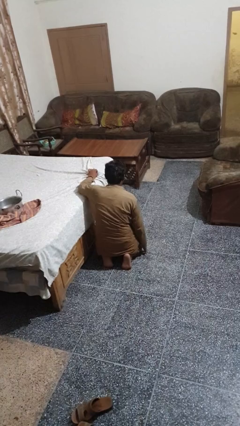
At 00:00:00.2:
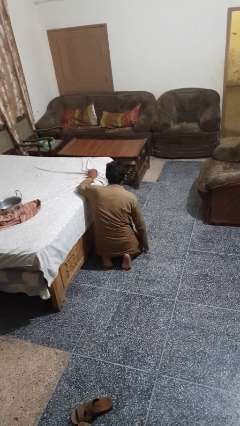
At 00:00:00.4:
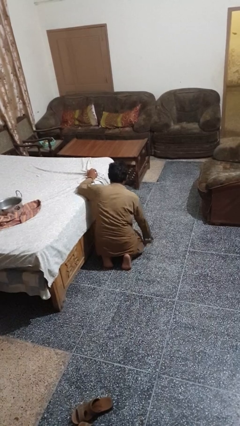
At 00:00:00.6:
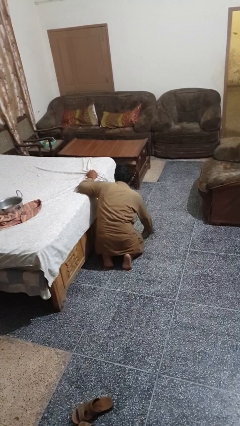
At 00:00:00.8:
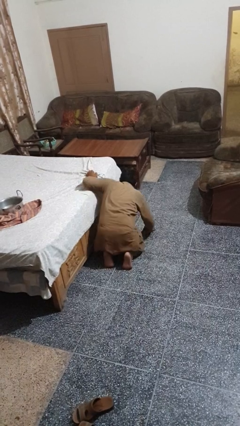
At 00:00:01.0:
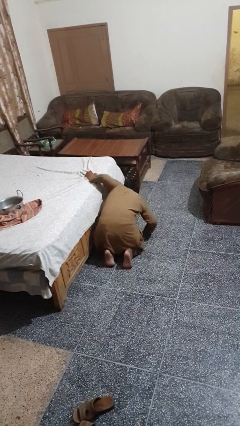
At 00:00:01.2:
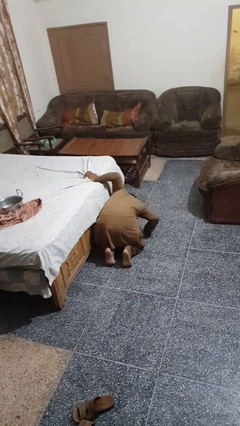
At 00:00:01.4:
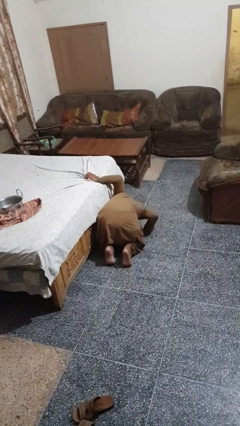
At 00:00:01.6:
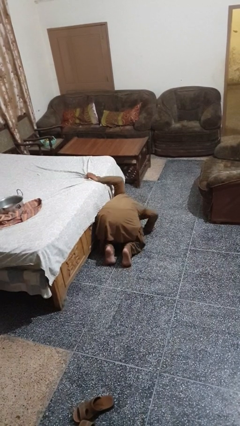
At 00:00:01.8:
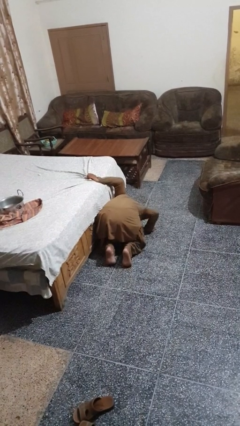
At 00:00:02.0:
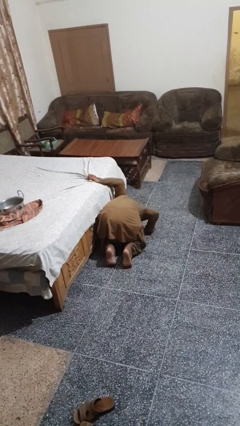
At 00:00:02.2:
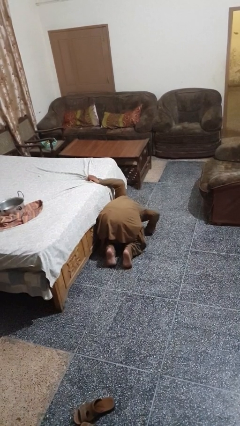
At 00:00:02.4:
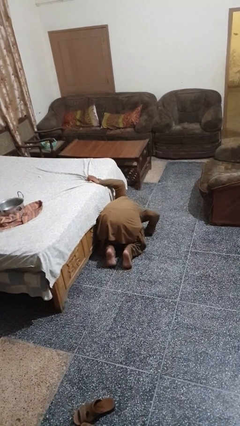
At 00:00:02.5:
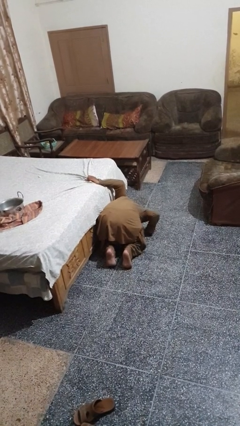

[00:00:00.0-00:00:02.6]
person searches under bed

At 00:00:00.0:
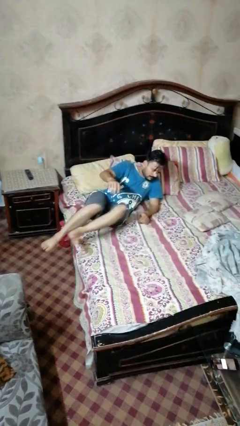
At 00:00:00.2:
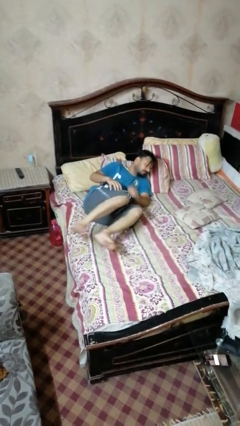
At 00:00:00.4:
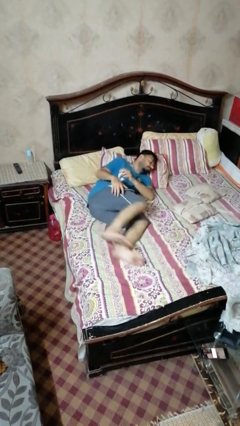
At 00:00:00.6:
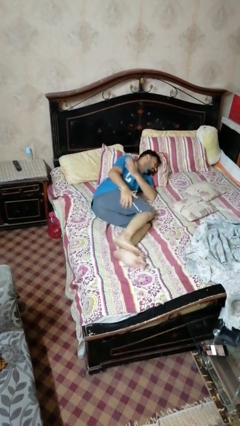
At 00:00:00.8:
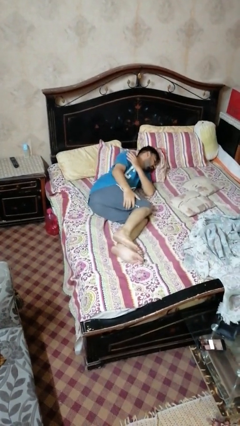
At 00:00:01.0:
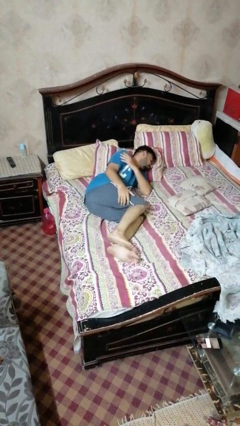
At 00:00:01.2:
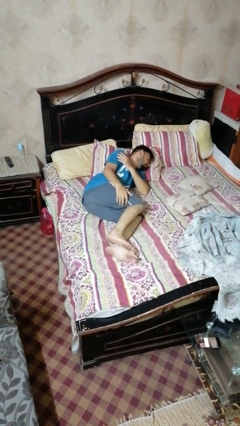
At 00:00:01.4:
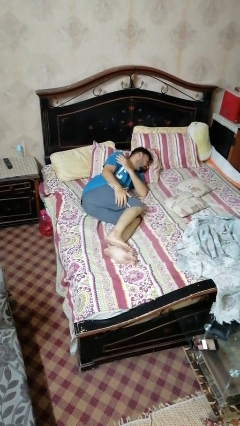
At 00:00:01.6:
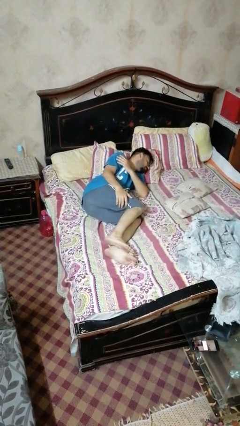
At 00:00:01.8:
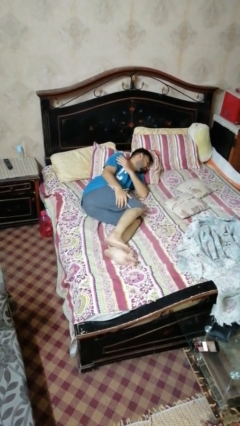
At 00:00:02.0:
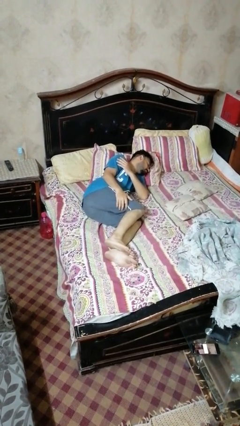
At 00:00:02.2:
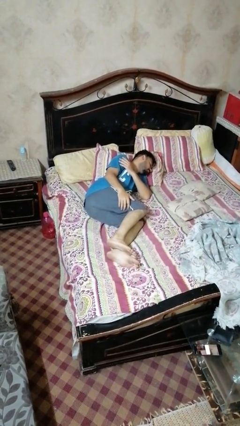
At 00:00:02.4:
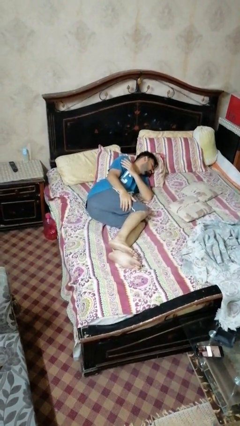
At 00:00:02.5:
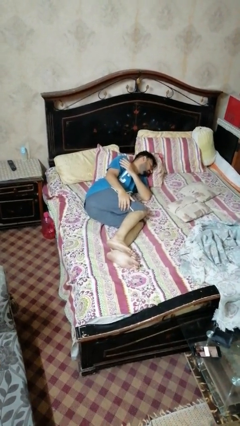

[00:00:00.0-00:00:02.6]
person lies down on bed

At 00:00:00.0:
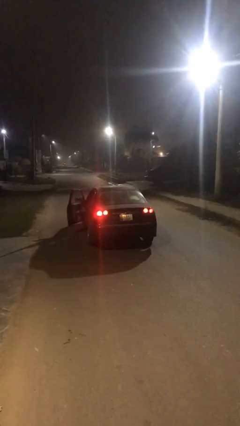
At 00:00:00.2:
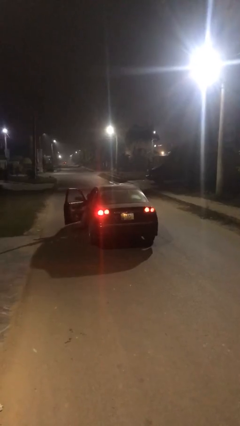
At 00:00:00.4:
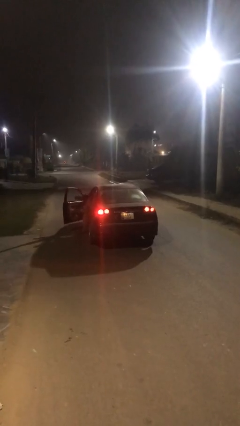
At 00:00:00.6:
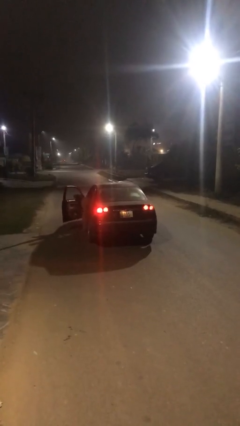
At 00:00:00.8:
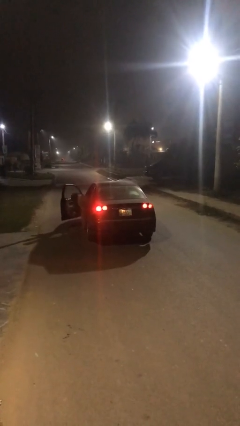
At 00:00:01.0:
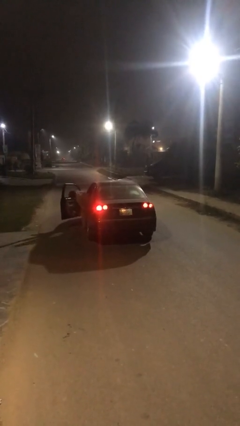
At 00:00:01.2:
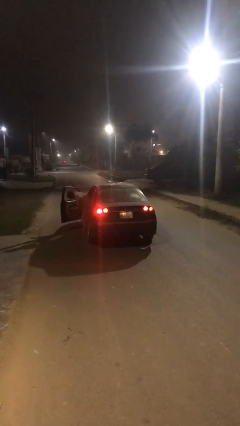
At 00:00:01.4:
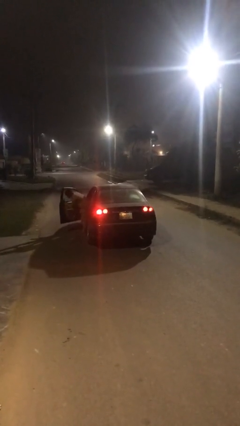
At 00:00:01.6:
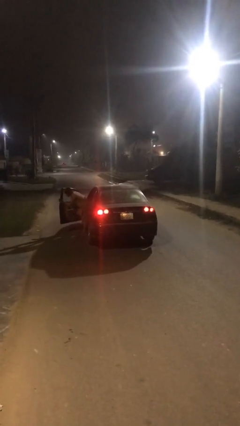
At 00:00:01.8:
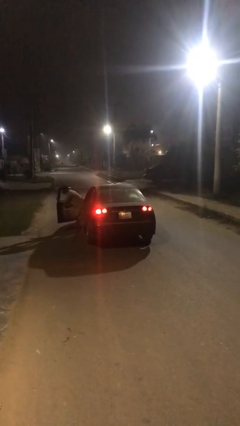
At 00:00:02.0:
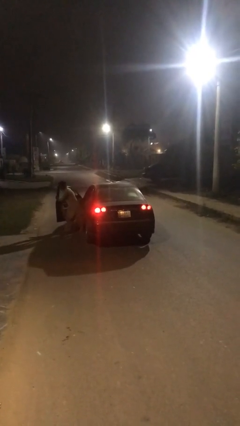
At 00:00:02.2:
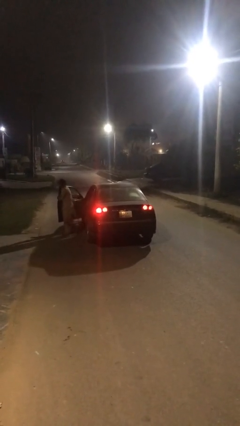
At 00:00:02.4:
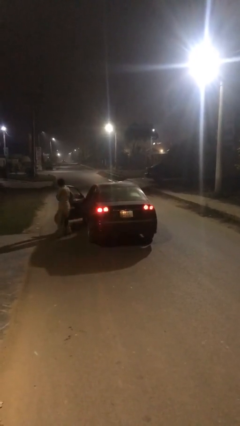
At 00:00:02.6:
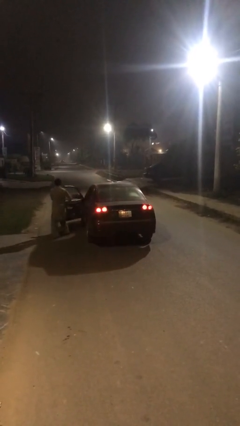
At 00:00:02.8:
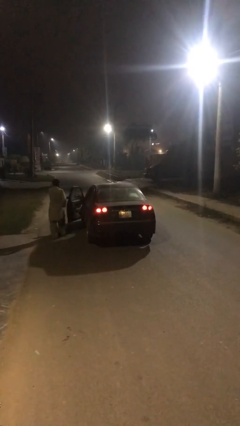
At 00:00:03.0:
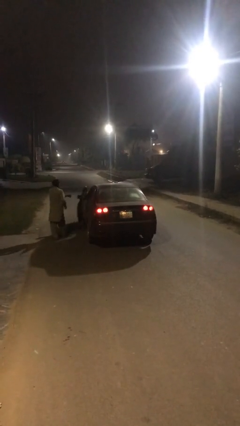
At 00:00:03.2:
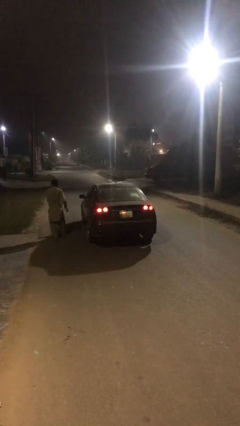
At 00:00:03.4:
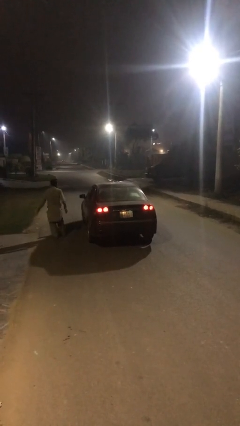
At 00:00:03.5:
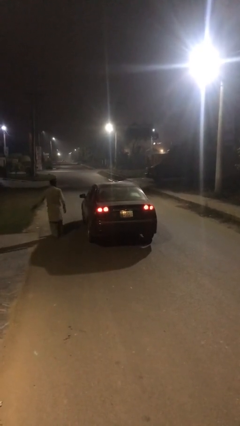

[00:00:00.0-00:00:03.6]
car drops off person

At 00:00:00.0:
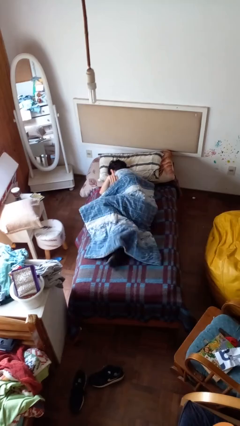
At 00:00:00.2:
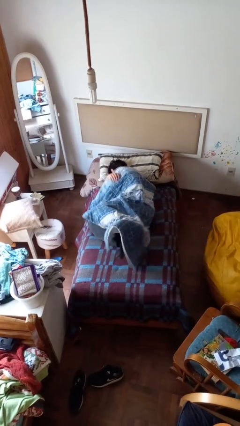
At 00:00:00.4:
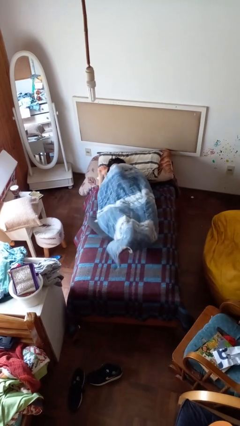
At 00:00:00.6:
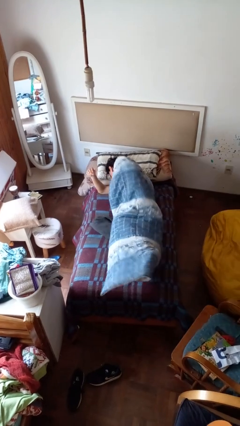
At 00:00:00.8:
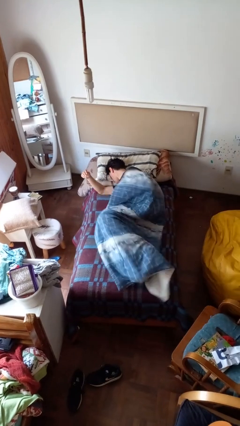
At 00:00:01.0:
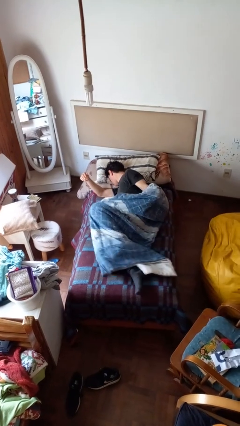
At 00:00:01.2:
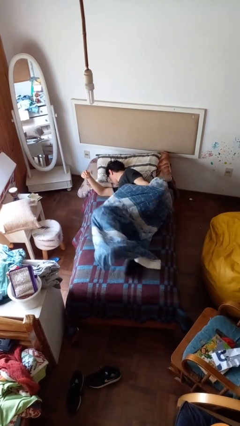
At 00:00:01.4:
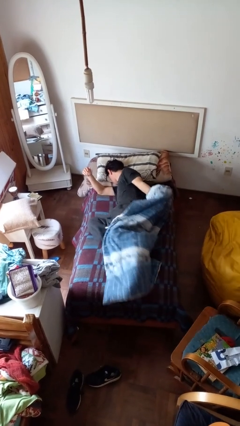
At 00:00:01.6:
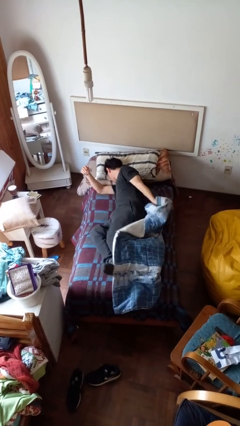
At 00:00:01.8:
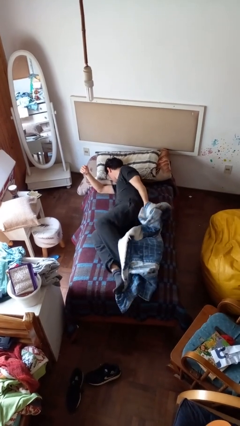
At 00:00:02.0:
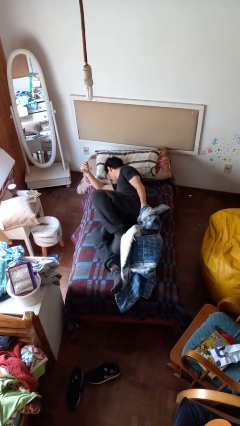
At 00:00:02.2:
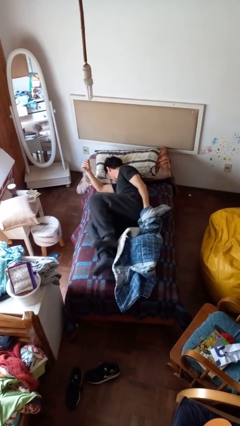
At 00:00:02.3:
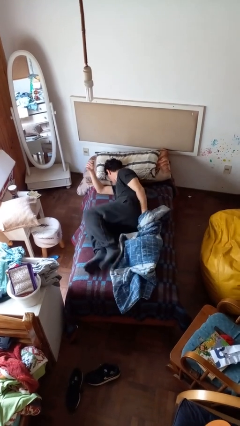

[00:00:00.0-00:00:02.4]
person uncovers with bedsheets

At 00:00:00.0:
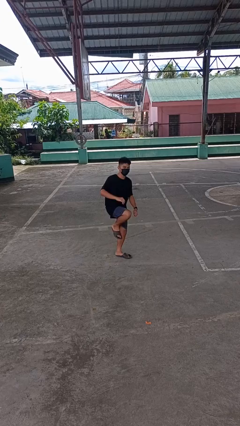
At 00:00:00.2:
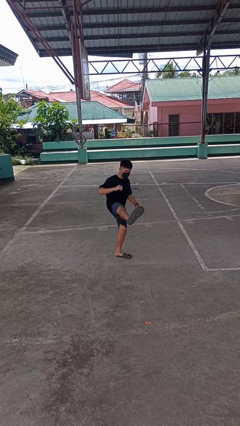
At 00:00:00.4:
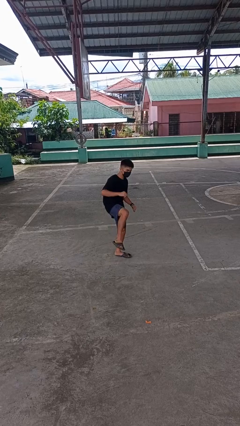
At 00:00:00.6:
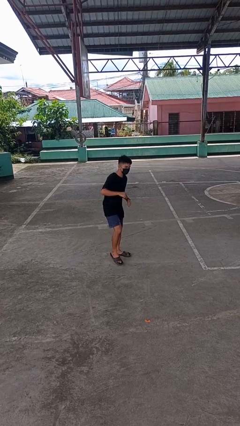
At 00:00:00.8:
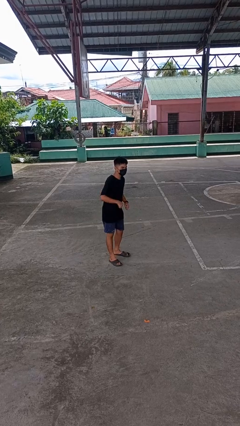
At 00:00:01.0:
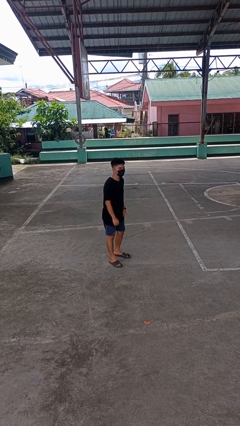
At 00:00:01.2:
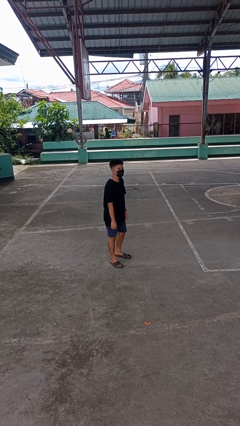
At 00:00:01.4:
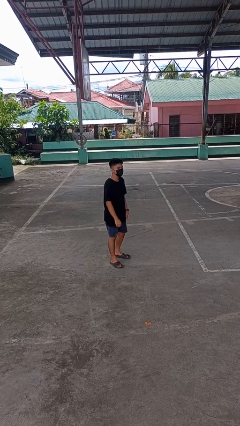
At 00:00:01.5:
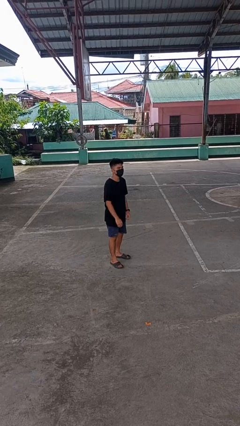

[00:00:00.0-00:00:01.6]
person karate kicks

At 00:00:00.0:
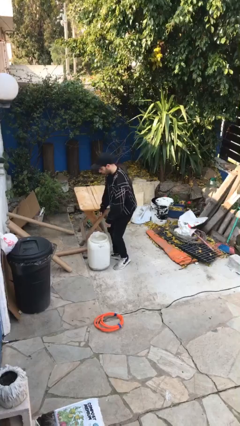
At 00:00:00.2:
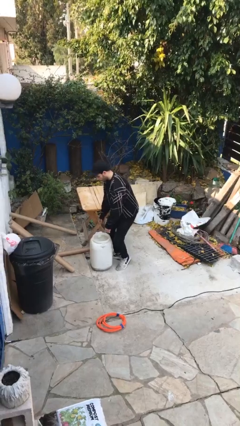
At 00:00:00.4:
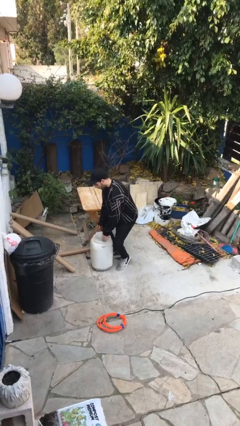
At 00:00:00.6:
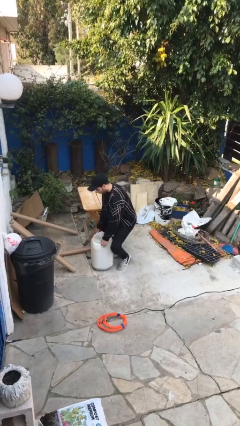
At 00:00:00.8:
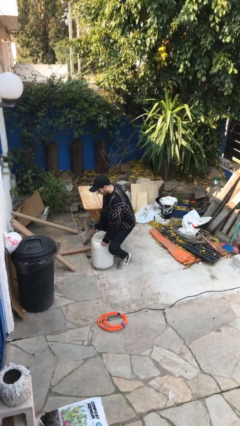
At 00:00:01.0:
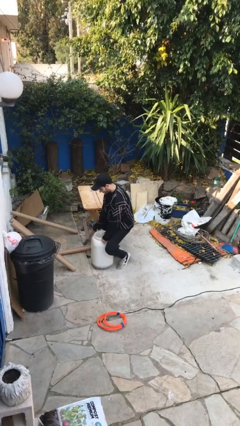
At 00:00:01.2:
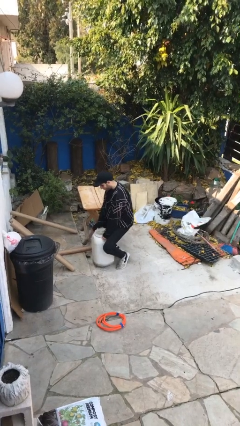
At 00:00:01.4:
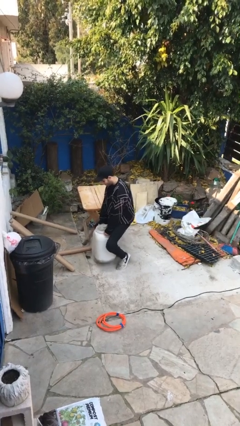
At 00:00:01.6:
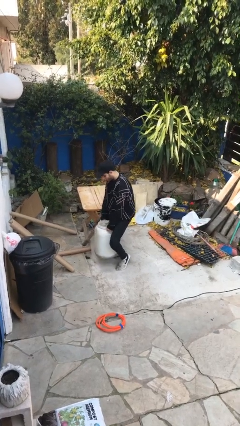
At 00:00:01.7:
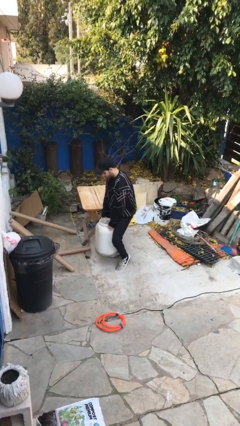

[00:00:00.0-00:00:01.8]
person picks up object from floor

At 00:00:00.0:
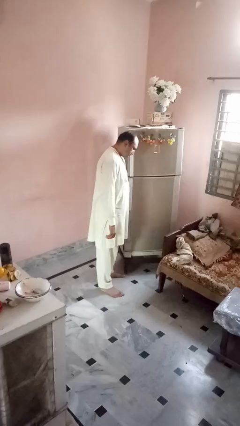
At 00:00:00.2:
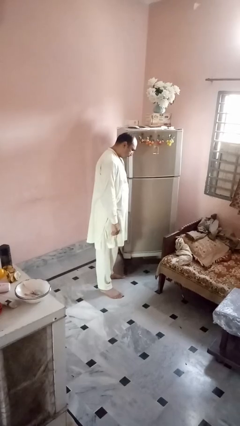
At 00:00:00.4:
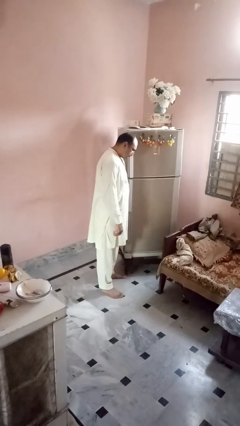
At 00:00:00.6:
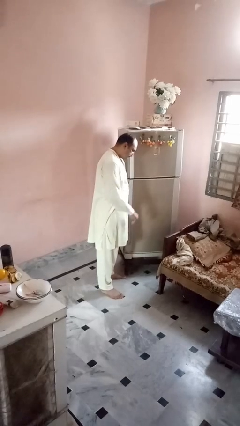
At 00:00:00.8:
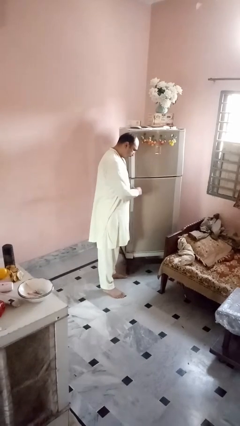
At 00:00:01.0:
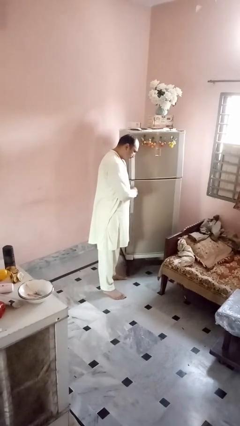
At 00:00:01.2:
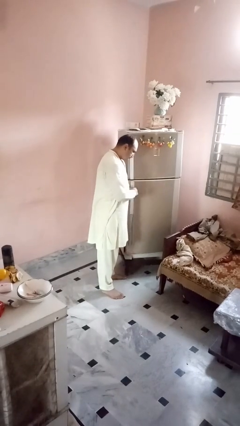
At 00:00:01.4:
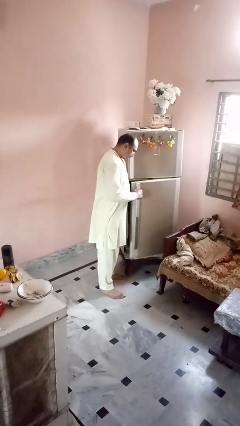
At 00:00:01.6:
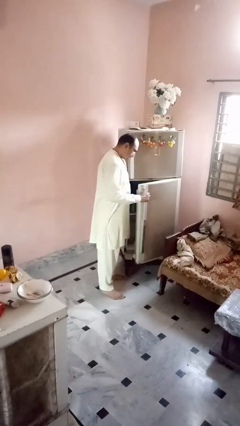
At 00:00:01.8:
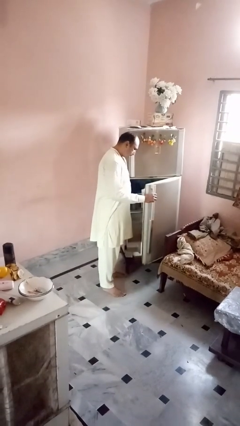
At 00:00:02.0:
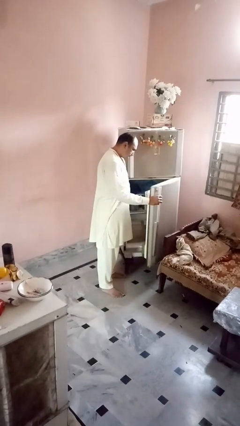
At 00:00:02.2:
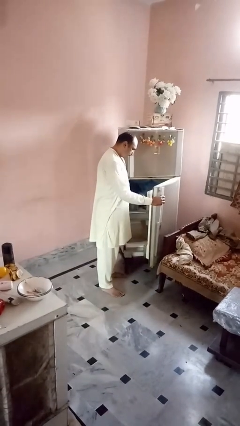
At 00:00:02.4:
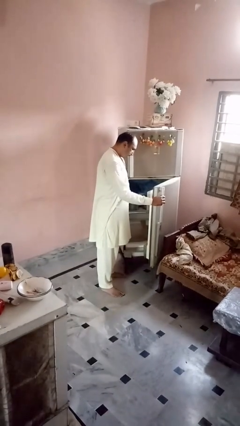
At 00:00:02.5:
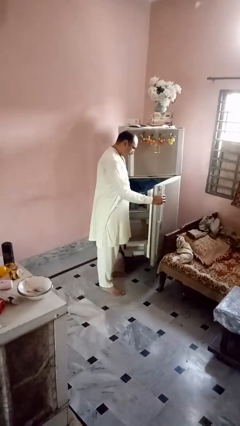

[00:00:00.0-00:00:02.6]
person opens refrigerator
